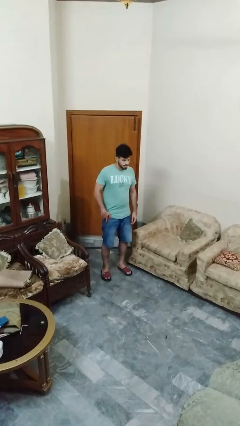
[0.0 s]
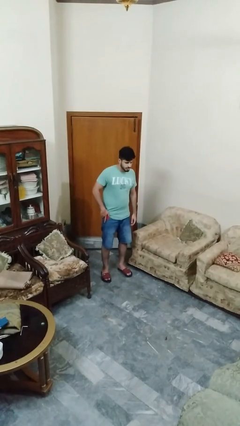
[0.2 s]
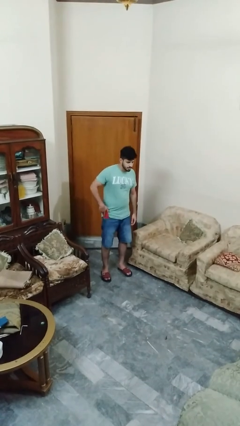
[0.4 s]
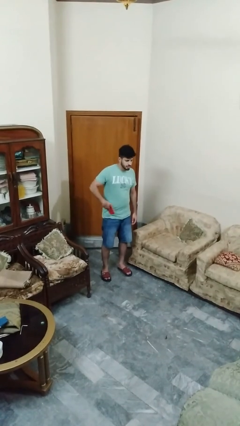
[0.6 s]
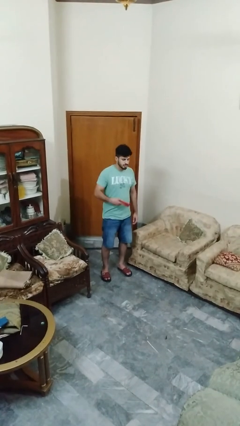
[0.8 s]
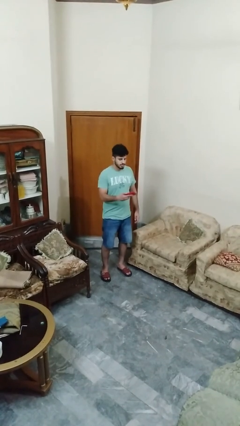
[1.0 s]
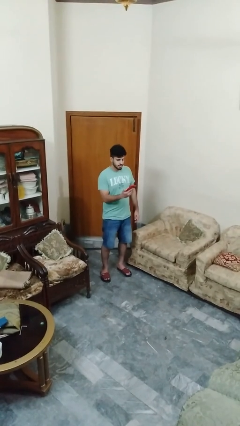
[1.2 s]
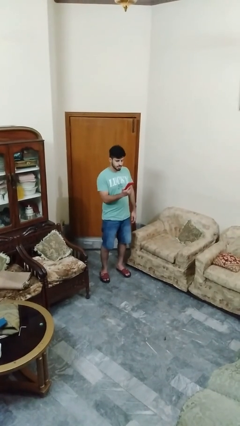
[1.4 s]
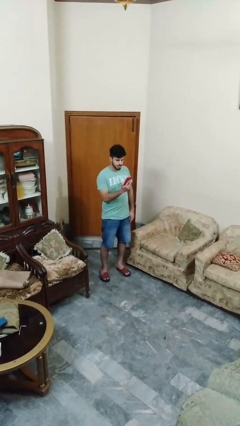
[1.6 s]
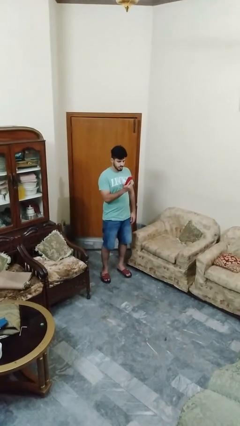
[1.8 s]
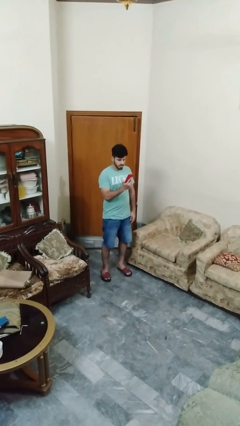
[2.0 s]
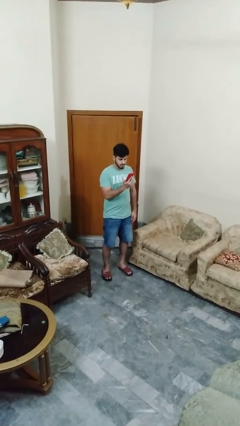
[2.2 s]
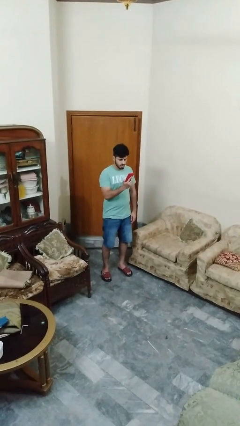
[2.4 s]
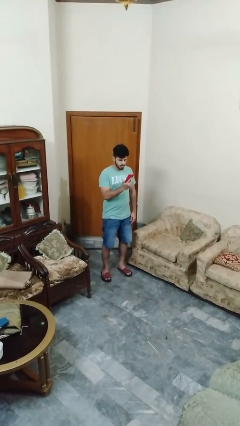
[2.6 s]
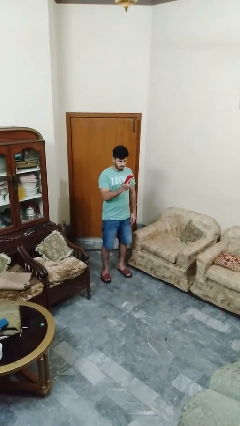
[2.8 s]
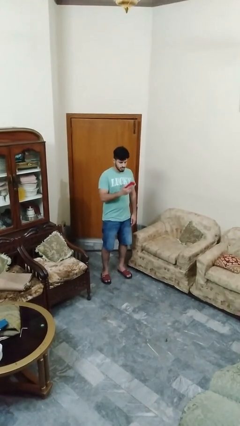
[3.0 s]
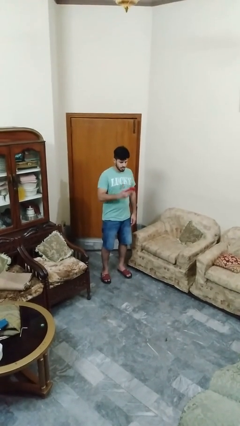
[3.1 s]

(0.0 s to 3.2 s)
person takes phone from pocket

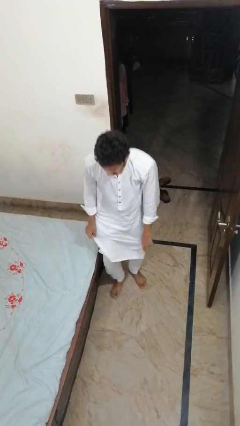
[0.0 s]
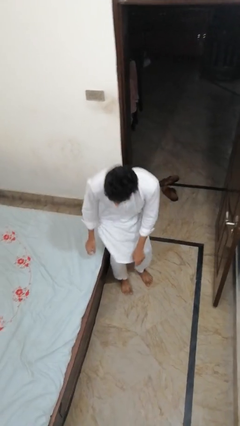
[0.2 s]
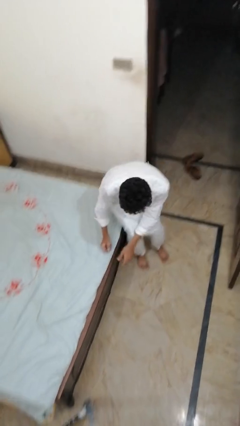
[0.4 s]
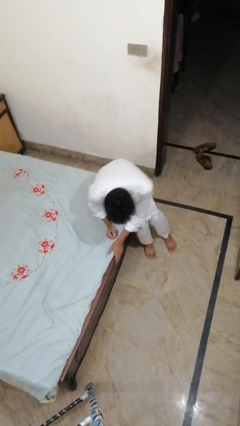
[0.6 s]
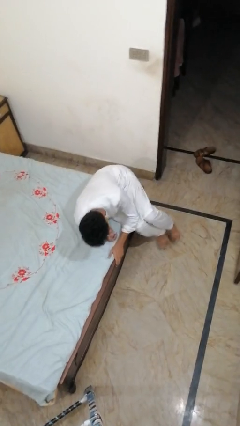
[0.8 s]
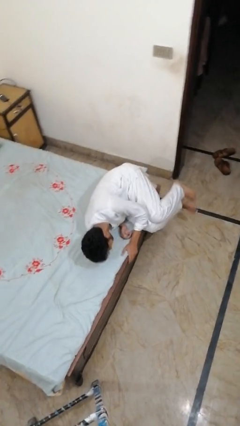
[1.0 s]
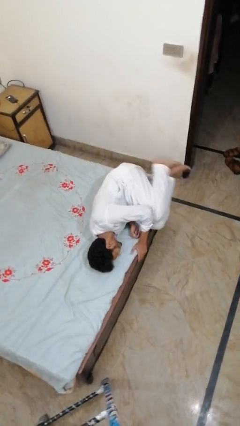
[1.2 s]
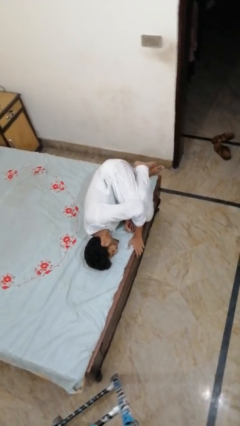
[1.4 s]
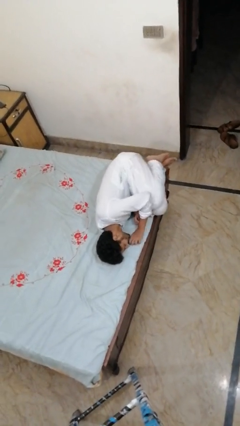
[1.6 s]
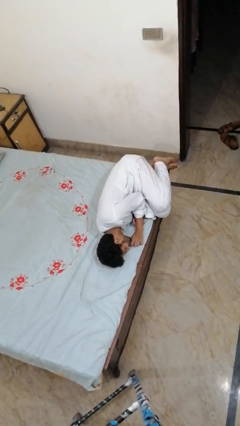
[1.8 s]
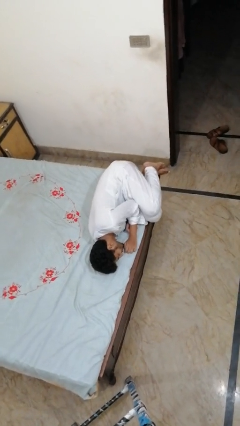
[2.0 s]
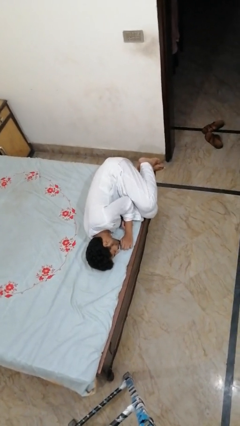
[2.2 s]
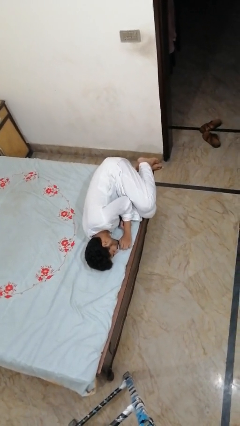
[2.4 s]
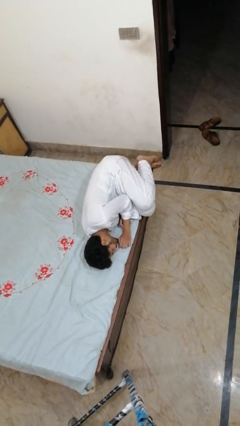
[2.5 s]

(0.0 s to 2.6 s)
person lies down on bed

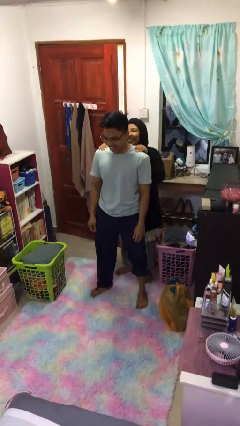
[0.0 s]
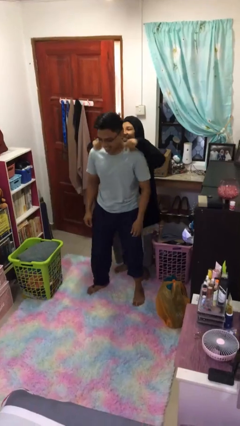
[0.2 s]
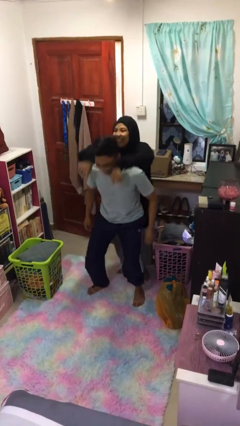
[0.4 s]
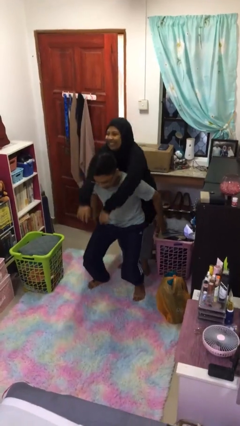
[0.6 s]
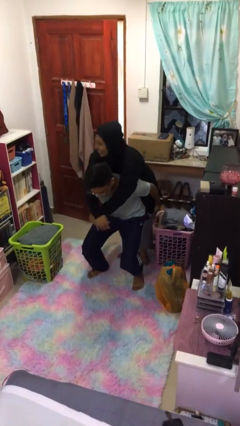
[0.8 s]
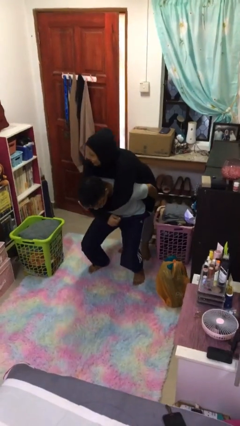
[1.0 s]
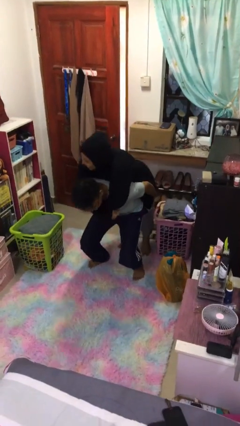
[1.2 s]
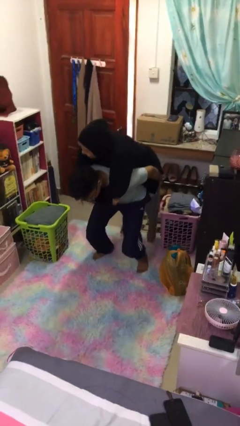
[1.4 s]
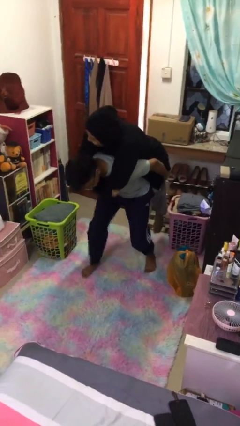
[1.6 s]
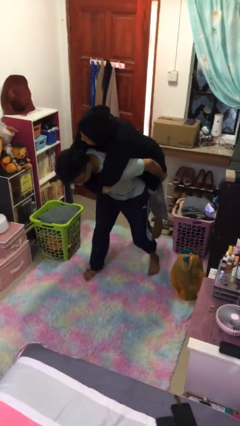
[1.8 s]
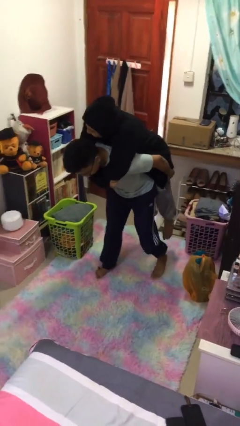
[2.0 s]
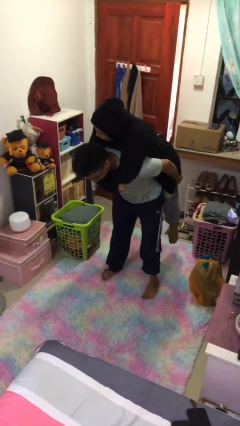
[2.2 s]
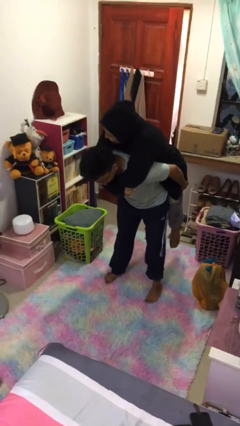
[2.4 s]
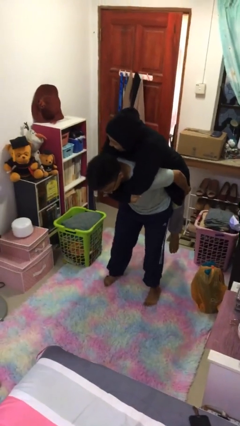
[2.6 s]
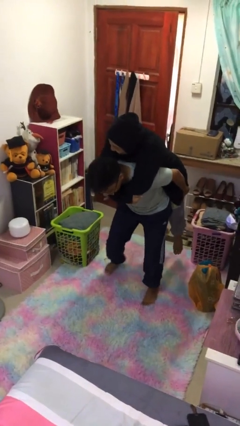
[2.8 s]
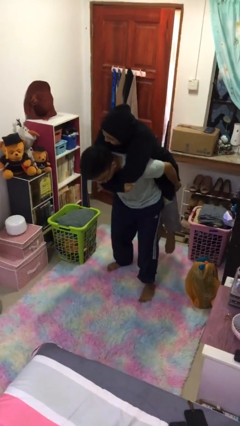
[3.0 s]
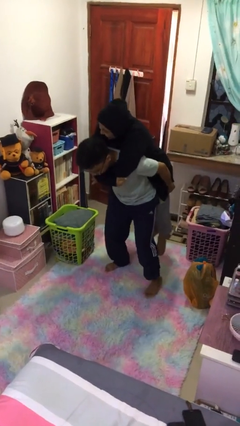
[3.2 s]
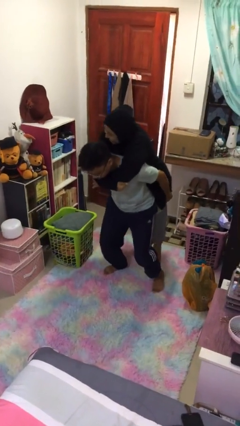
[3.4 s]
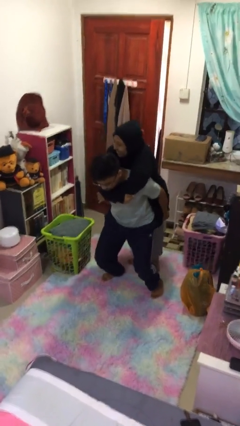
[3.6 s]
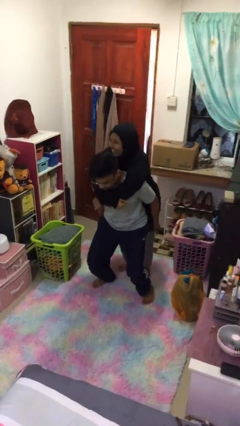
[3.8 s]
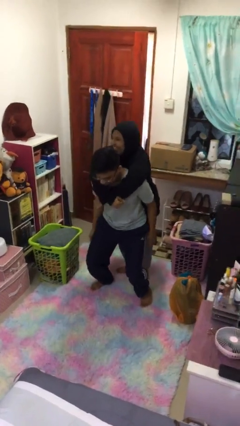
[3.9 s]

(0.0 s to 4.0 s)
person carries person on back

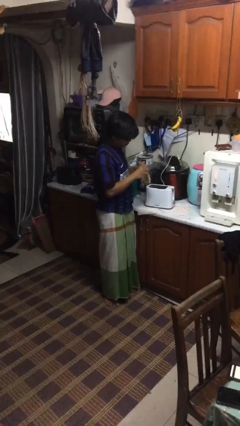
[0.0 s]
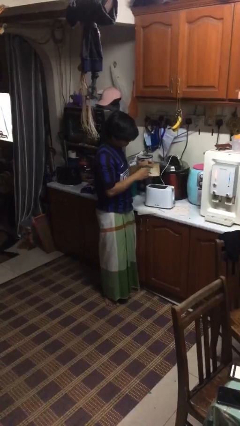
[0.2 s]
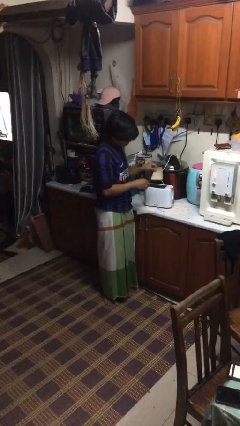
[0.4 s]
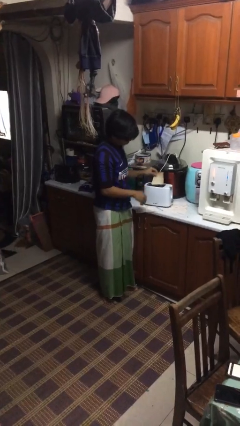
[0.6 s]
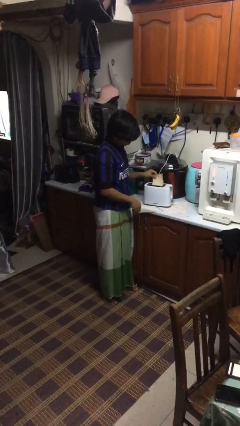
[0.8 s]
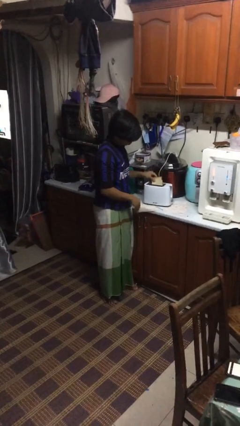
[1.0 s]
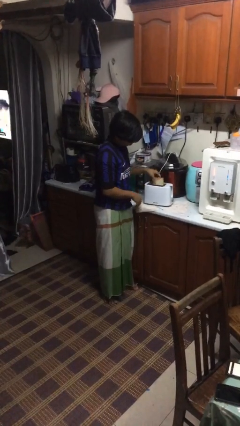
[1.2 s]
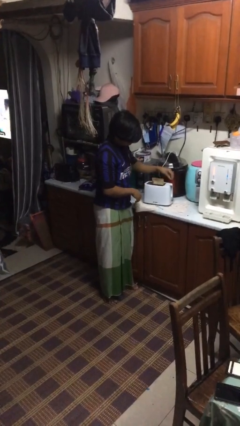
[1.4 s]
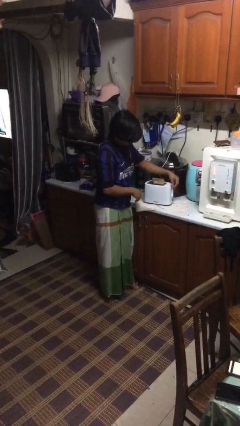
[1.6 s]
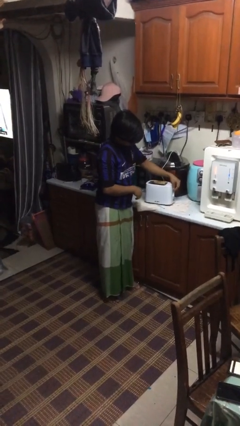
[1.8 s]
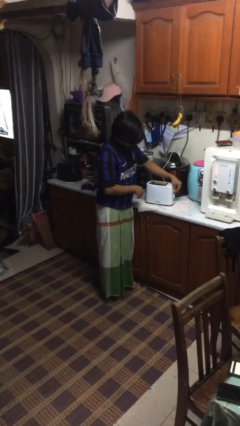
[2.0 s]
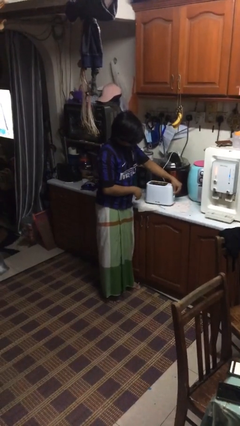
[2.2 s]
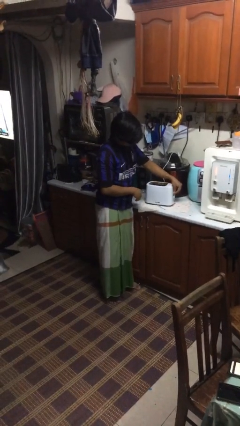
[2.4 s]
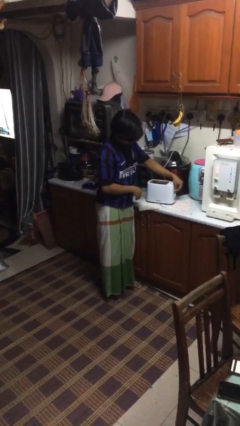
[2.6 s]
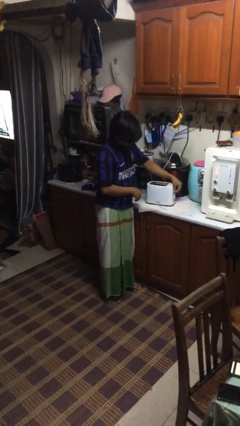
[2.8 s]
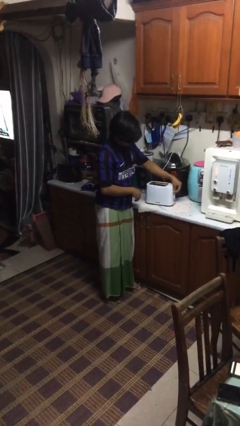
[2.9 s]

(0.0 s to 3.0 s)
person puts object into toaster

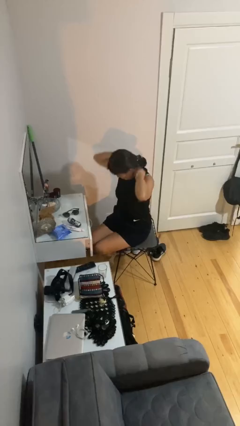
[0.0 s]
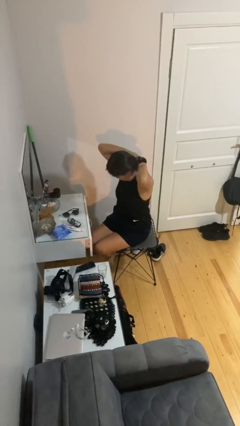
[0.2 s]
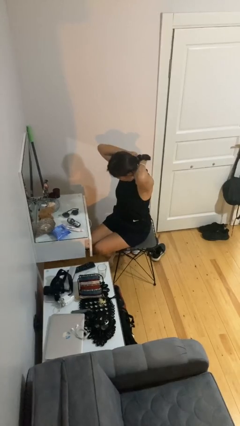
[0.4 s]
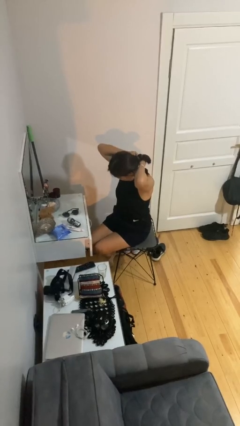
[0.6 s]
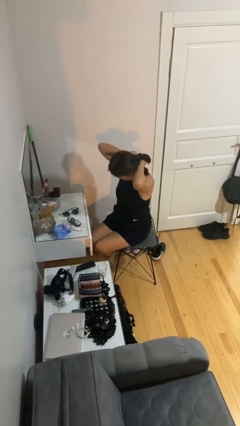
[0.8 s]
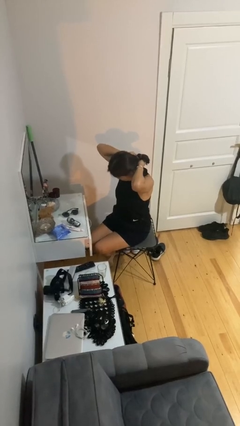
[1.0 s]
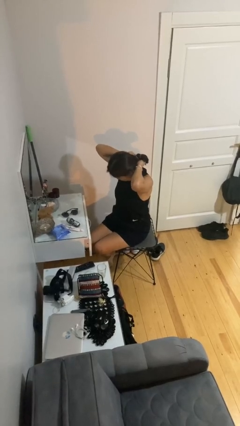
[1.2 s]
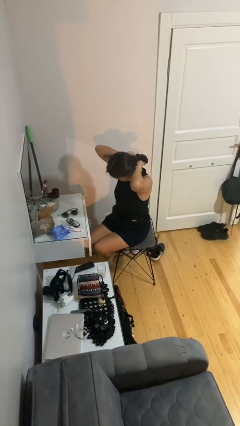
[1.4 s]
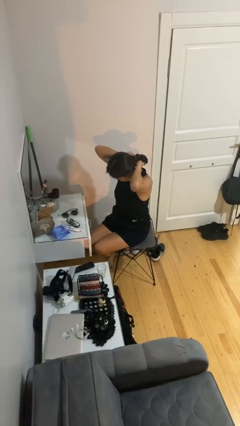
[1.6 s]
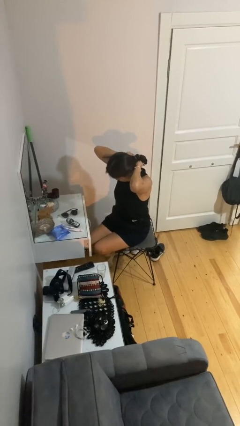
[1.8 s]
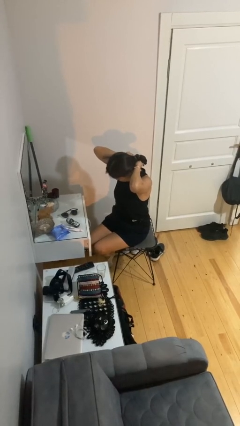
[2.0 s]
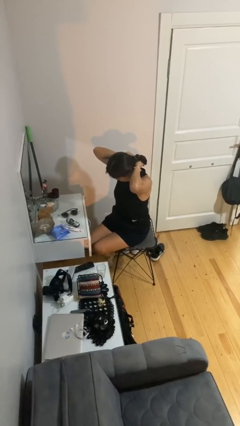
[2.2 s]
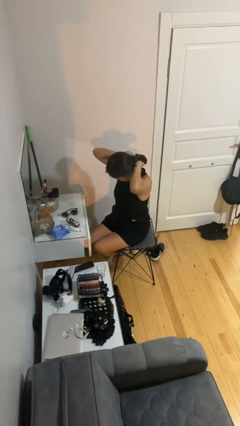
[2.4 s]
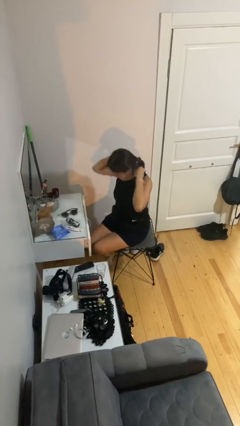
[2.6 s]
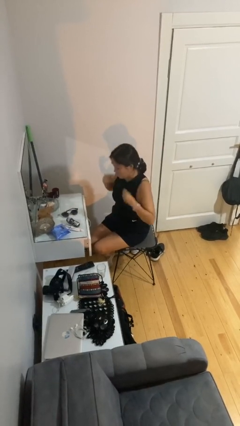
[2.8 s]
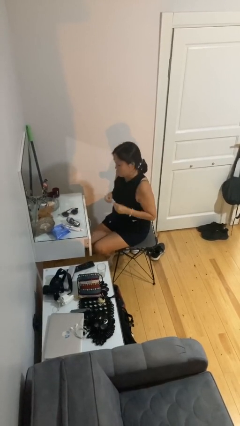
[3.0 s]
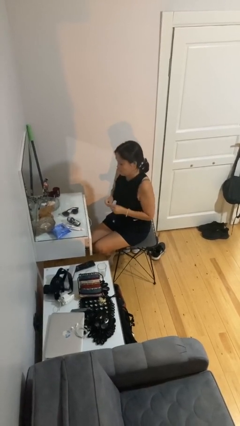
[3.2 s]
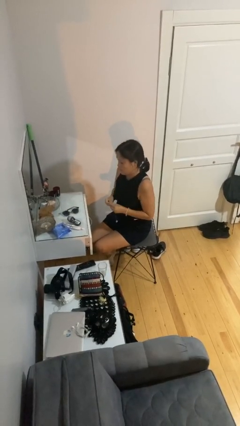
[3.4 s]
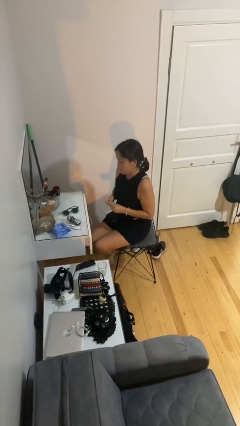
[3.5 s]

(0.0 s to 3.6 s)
person takes off necklace

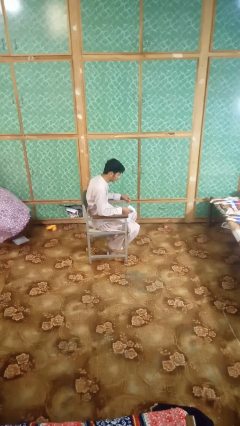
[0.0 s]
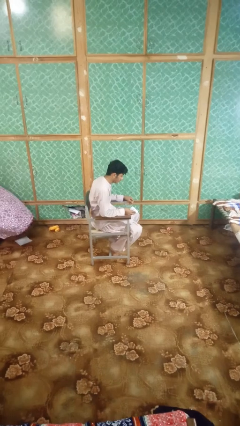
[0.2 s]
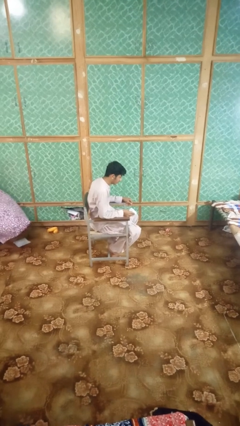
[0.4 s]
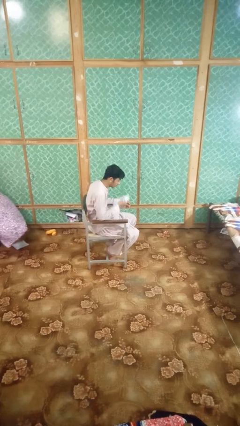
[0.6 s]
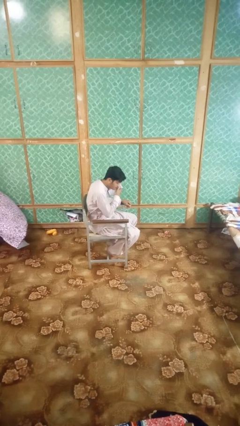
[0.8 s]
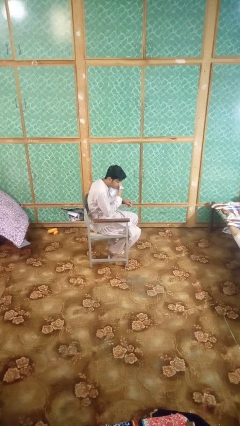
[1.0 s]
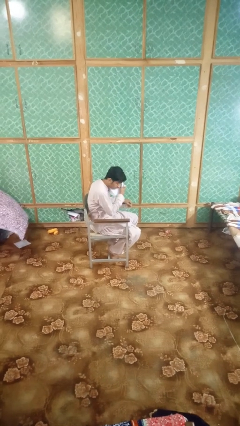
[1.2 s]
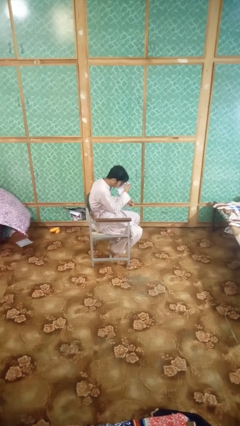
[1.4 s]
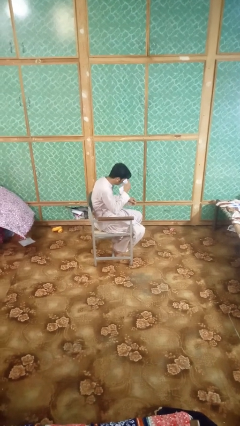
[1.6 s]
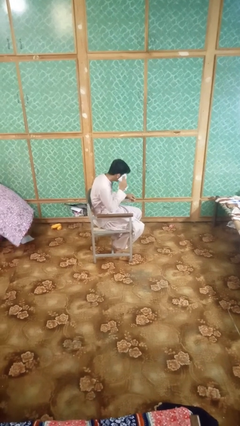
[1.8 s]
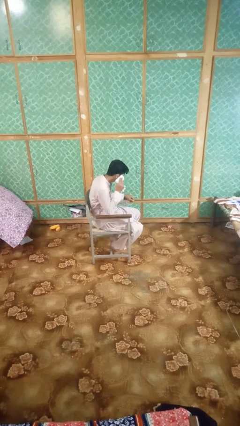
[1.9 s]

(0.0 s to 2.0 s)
person wipes mouth with napkin
